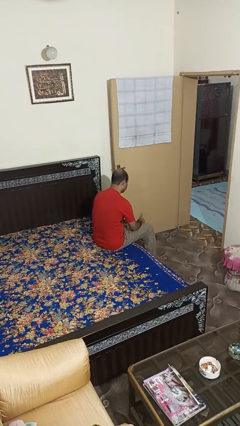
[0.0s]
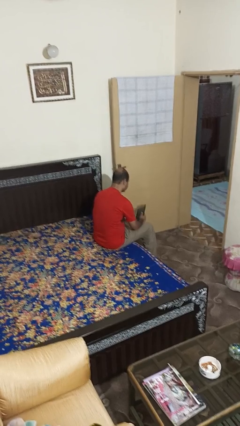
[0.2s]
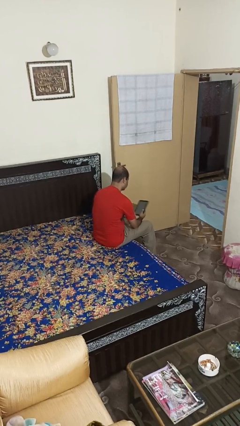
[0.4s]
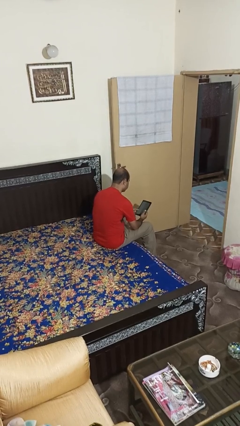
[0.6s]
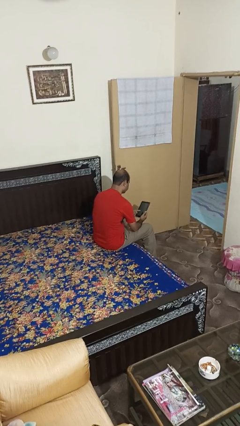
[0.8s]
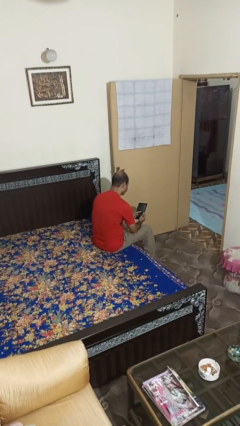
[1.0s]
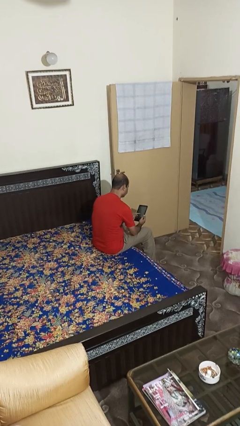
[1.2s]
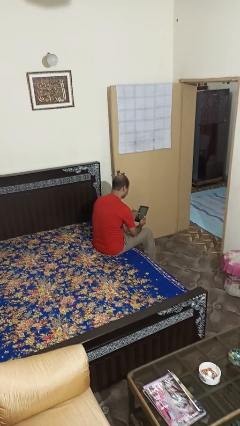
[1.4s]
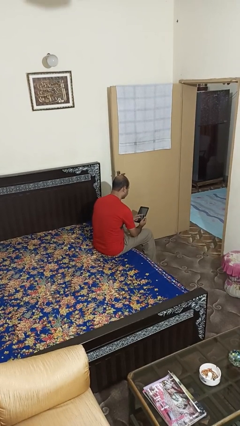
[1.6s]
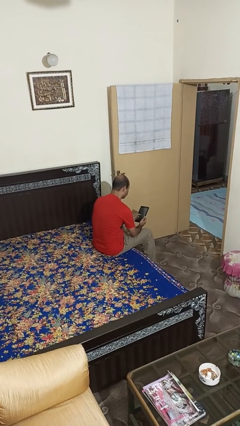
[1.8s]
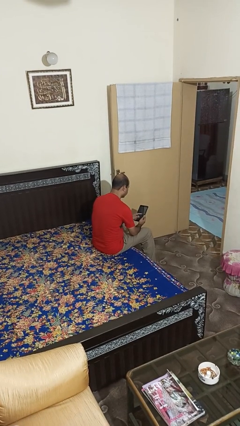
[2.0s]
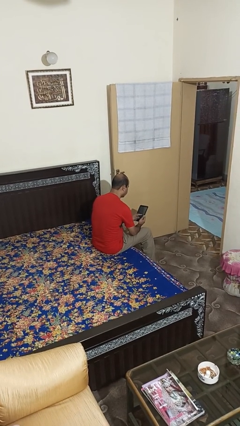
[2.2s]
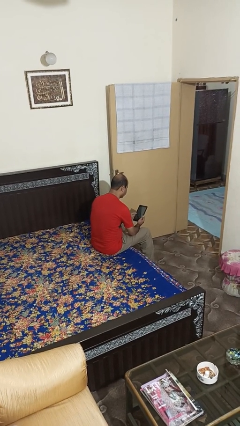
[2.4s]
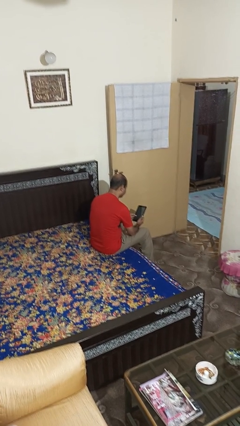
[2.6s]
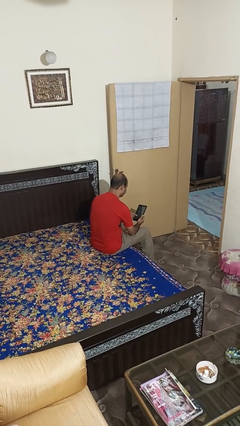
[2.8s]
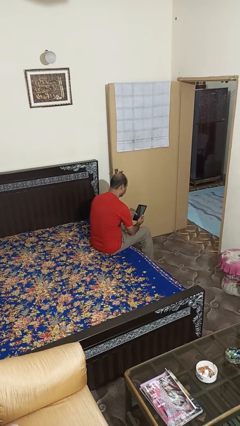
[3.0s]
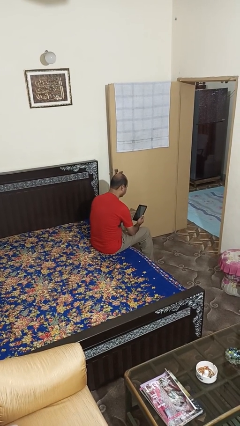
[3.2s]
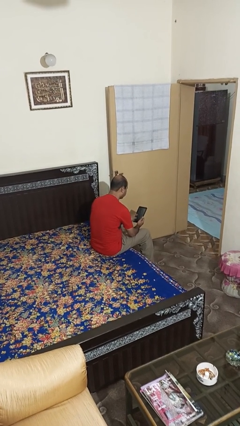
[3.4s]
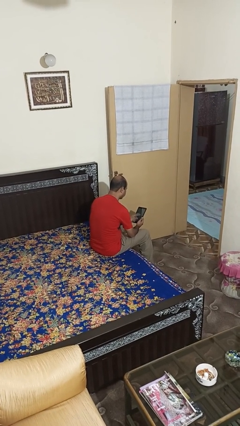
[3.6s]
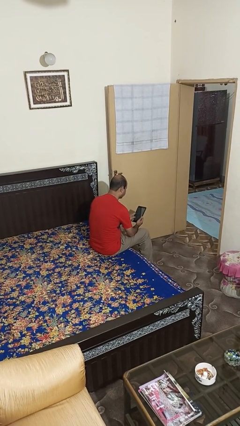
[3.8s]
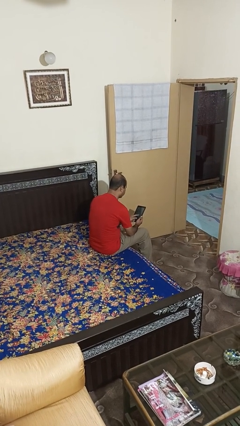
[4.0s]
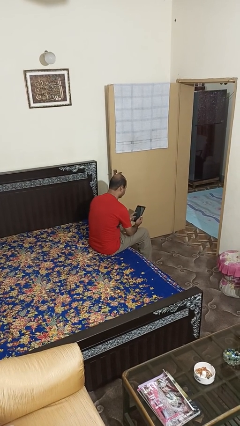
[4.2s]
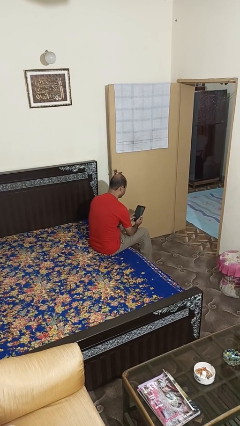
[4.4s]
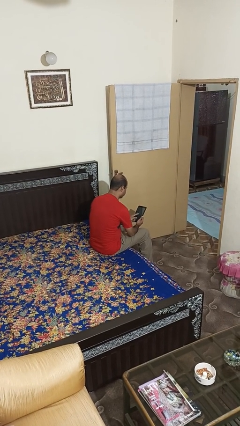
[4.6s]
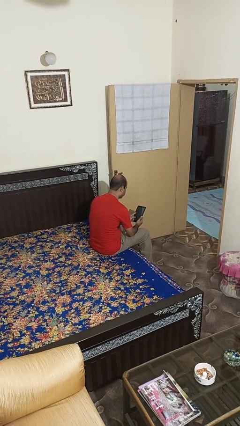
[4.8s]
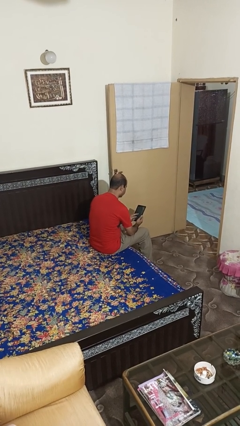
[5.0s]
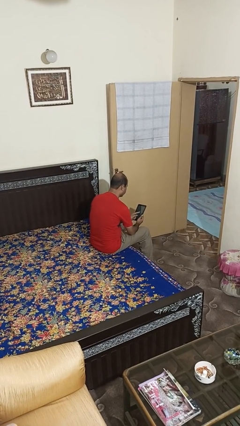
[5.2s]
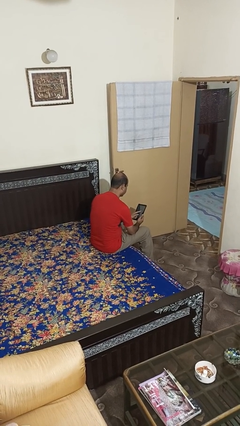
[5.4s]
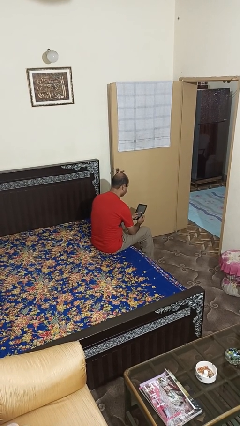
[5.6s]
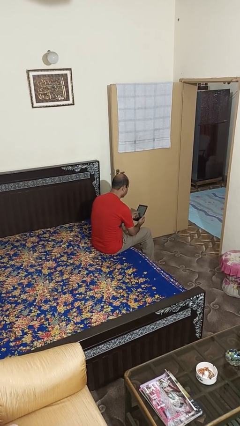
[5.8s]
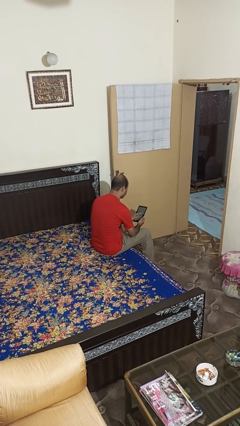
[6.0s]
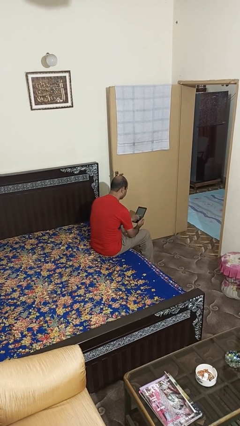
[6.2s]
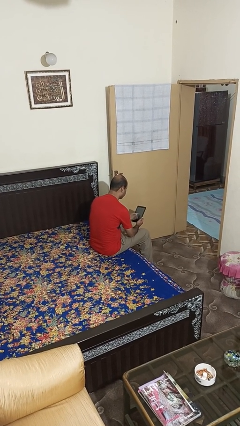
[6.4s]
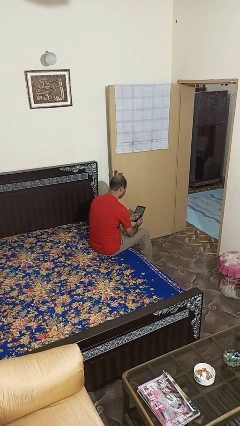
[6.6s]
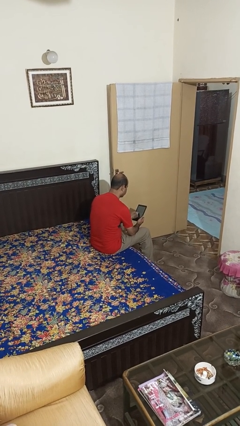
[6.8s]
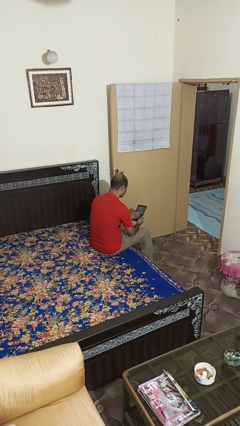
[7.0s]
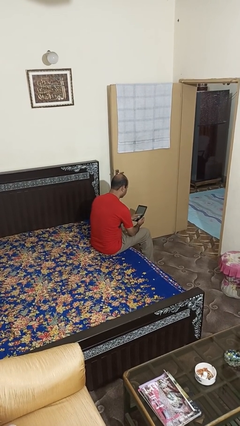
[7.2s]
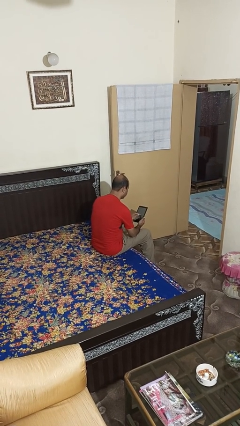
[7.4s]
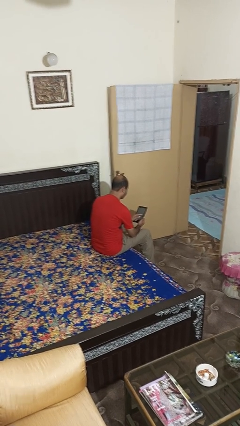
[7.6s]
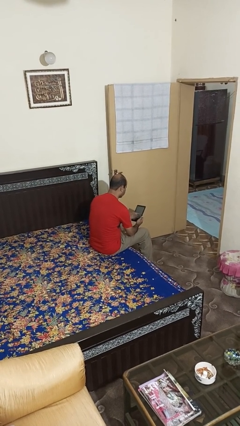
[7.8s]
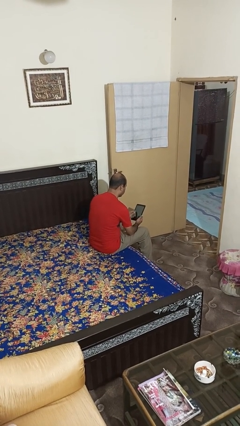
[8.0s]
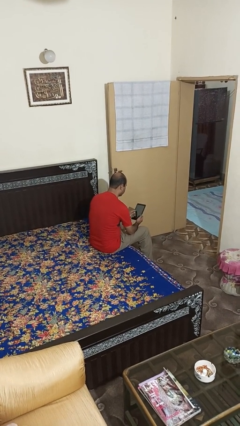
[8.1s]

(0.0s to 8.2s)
person interacts with tablet

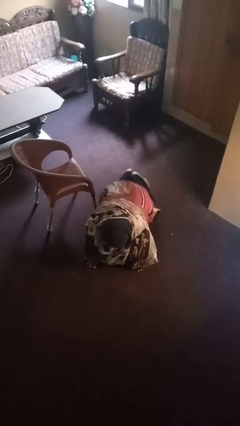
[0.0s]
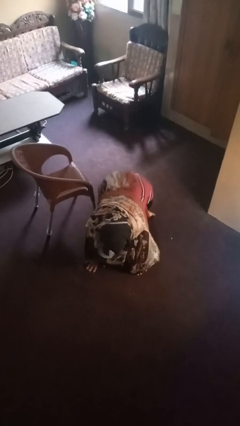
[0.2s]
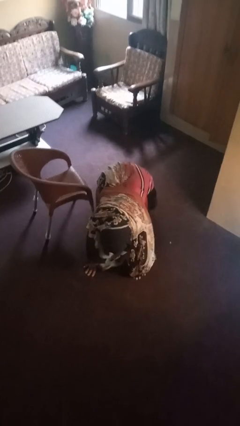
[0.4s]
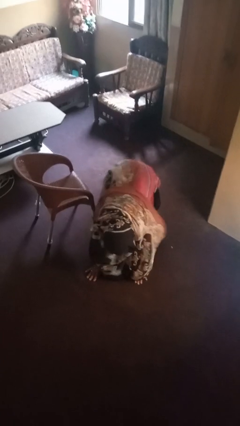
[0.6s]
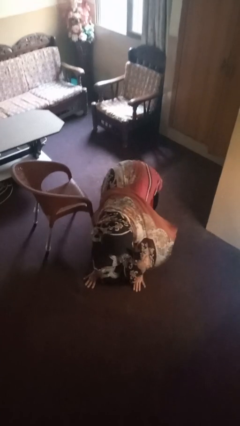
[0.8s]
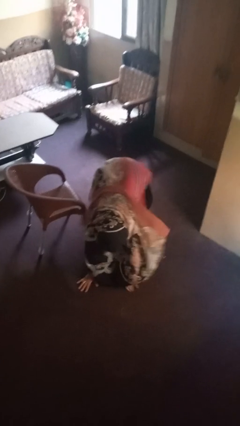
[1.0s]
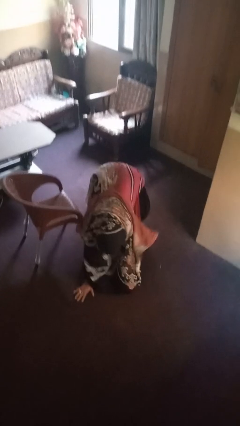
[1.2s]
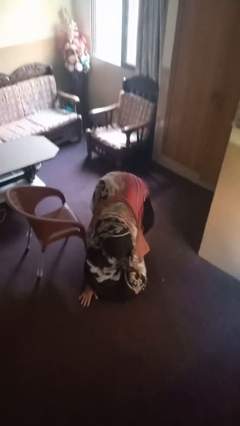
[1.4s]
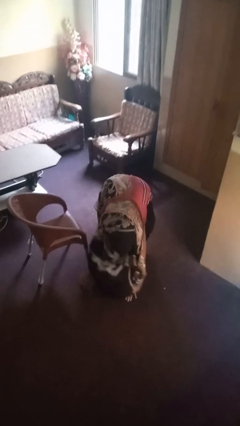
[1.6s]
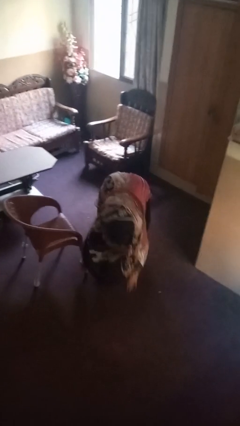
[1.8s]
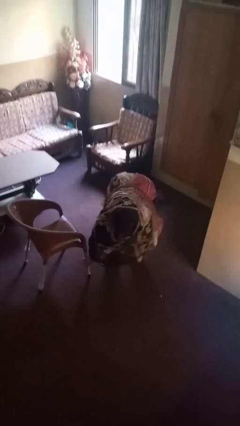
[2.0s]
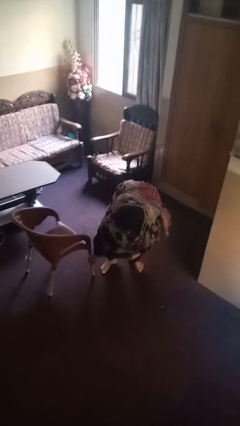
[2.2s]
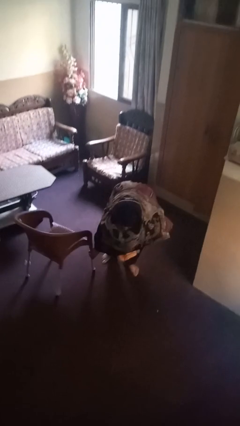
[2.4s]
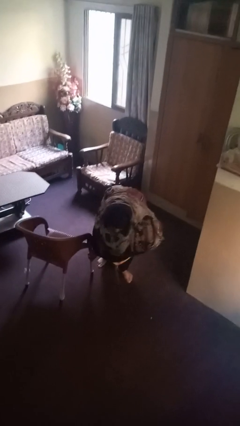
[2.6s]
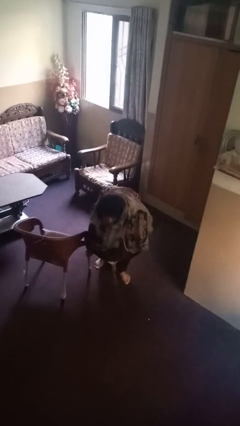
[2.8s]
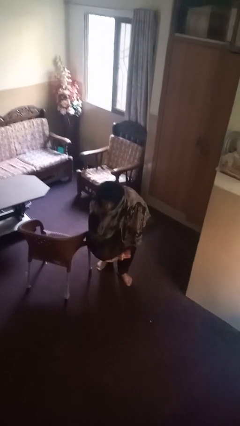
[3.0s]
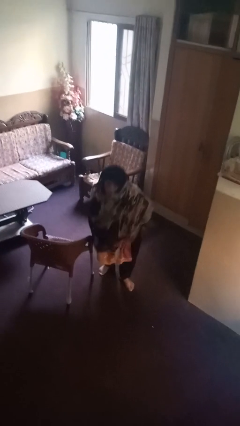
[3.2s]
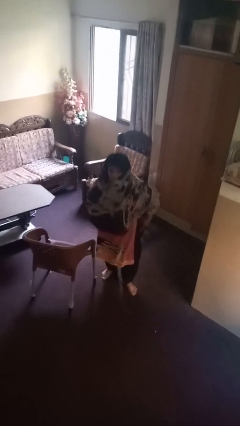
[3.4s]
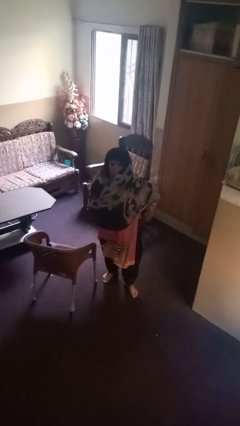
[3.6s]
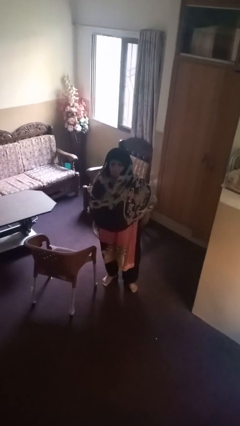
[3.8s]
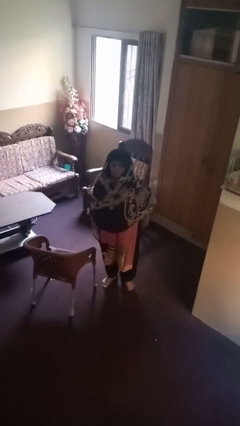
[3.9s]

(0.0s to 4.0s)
person stands up from floor

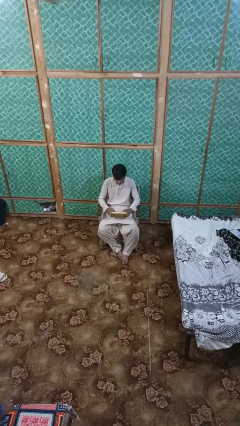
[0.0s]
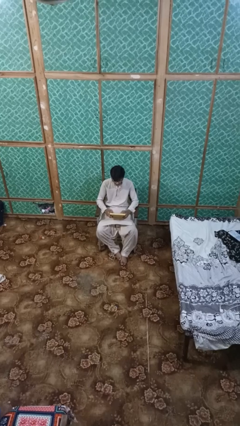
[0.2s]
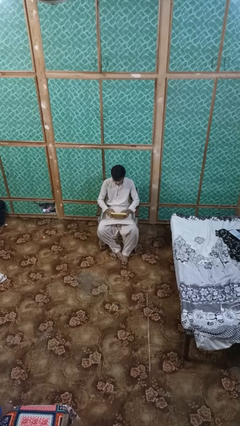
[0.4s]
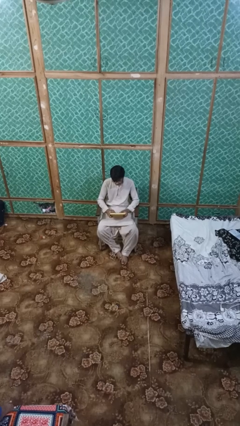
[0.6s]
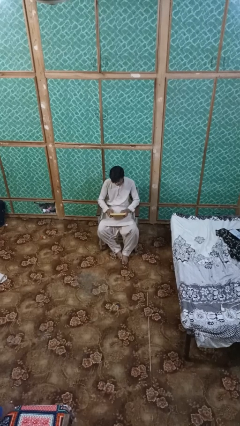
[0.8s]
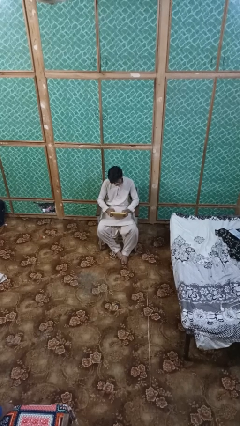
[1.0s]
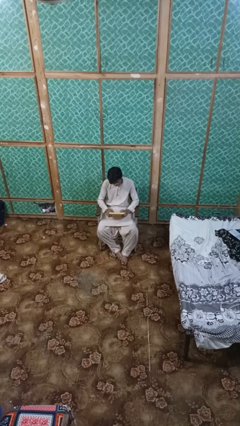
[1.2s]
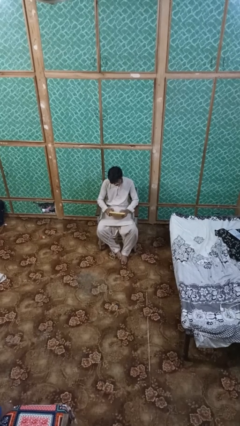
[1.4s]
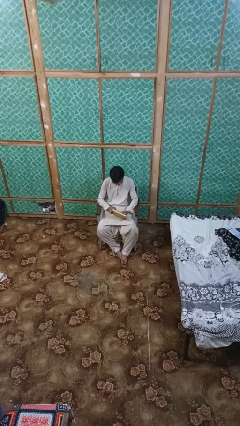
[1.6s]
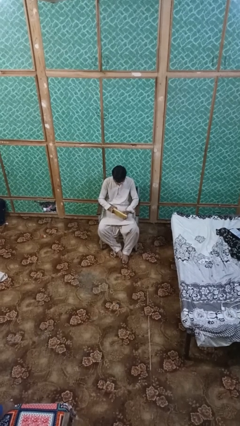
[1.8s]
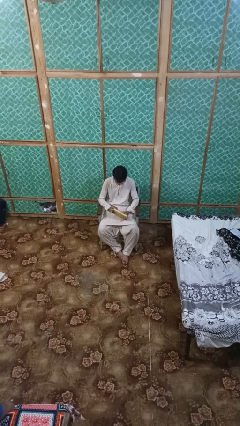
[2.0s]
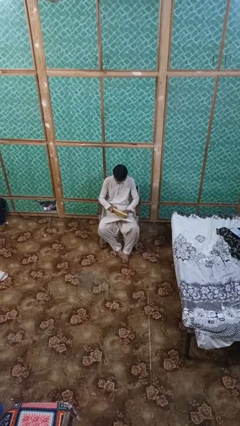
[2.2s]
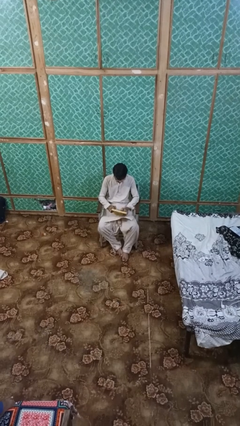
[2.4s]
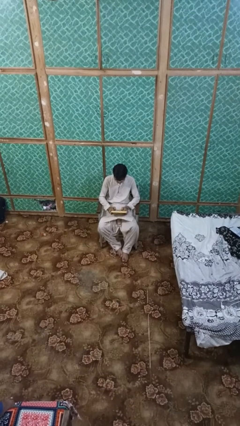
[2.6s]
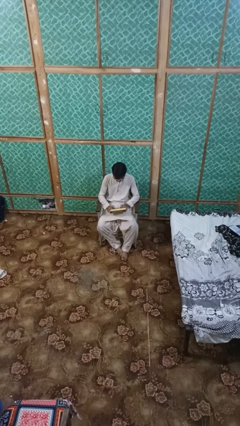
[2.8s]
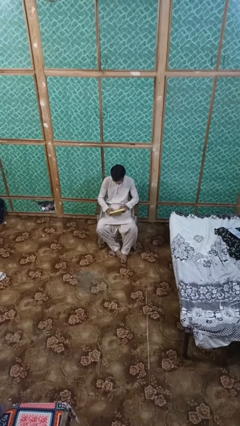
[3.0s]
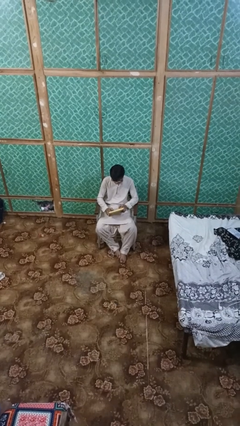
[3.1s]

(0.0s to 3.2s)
person interacts with handheld game

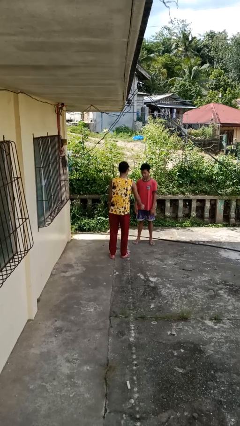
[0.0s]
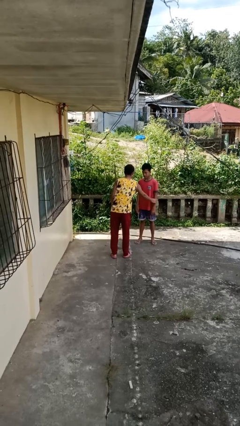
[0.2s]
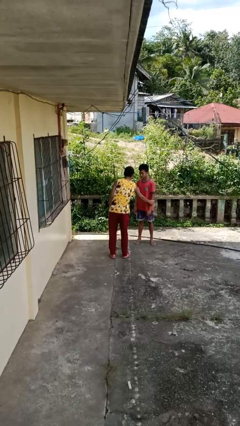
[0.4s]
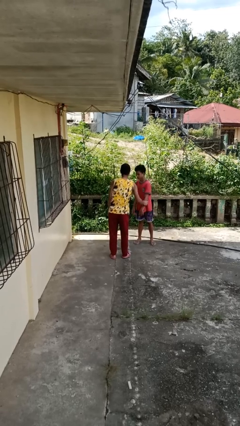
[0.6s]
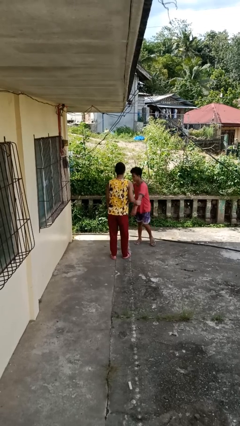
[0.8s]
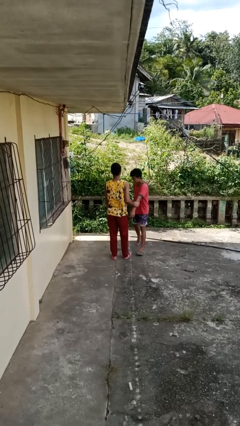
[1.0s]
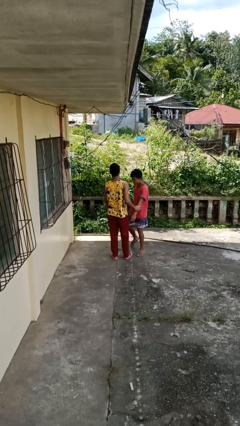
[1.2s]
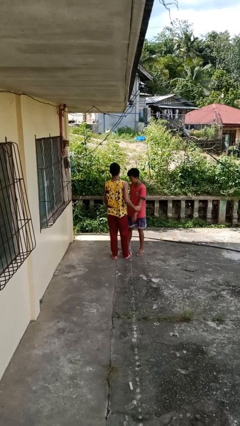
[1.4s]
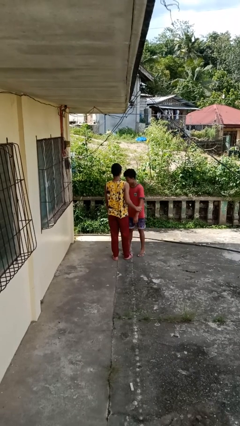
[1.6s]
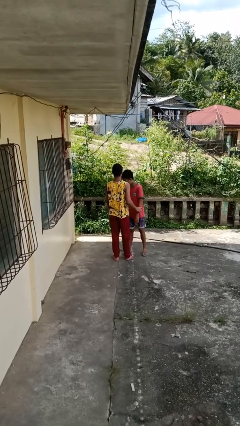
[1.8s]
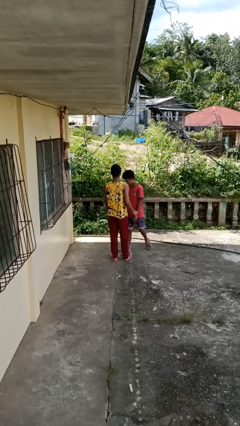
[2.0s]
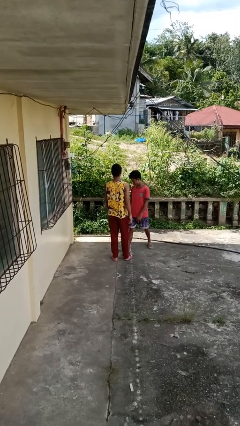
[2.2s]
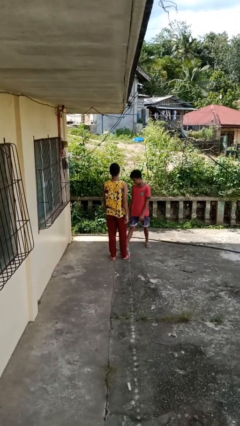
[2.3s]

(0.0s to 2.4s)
person grabs person by forearm

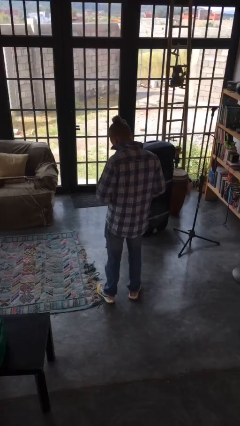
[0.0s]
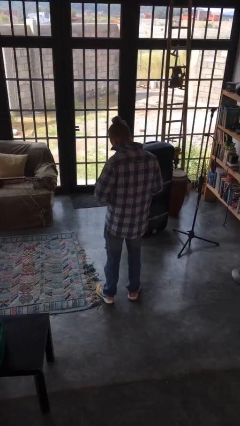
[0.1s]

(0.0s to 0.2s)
person buttons shirt
